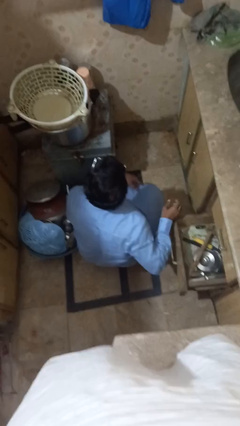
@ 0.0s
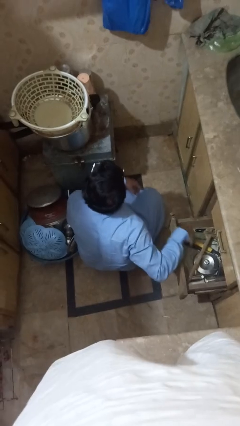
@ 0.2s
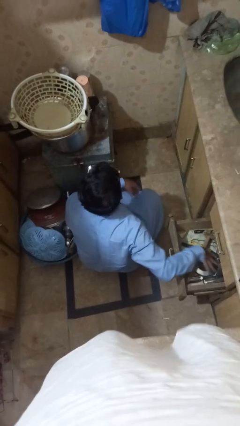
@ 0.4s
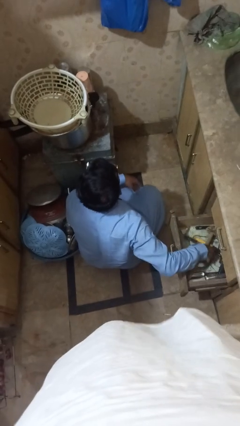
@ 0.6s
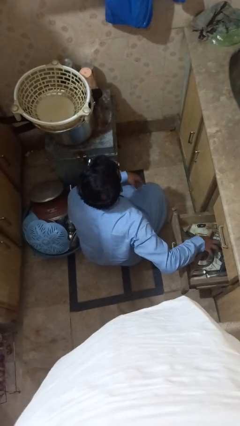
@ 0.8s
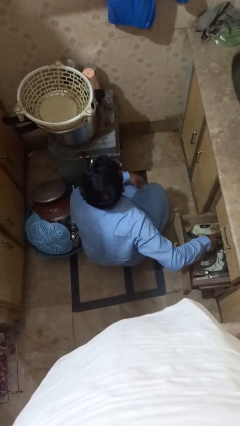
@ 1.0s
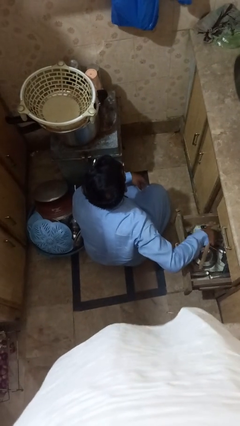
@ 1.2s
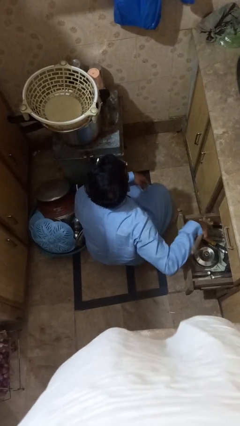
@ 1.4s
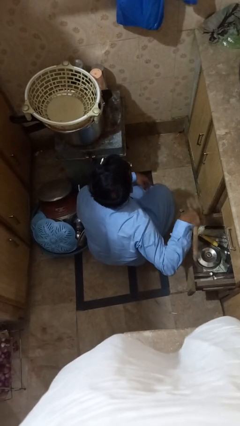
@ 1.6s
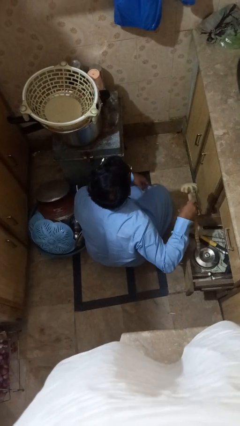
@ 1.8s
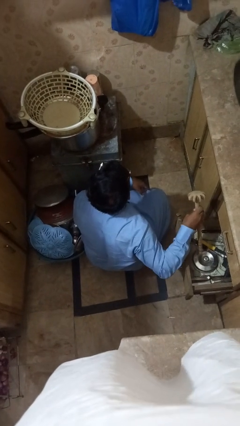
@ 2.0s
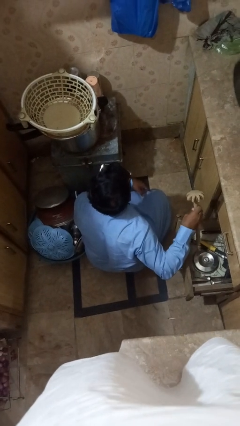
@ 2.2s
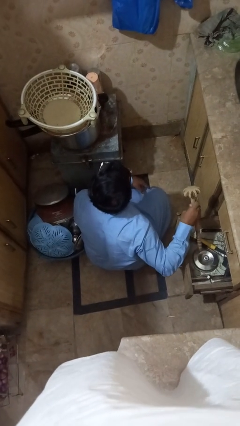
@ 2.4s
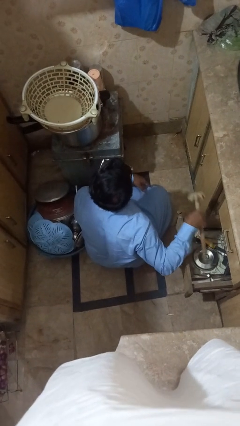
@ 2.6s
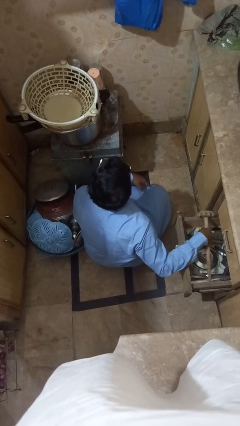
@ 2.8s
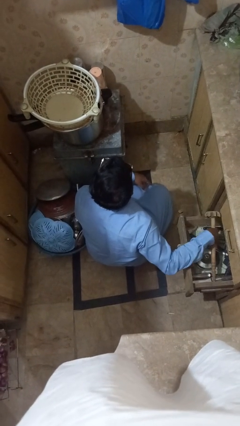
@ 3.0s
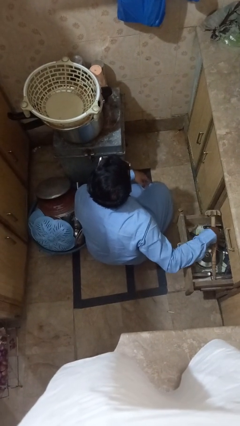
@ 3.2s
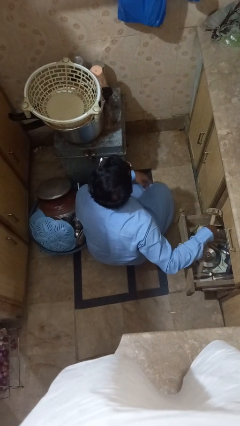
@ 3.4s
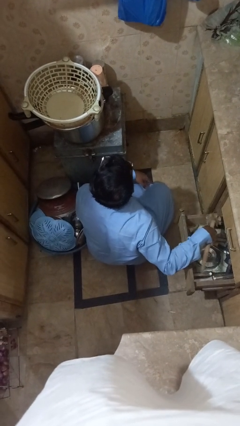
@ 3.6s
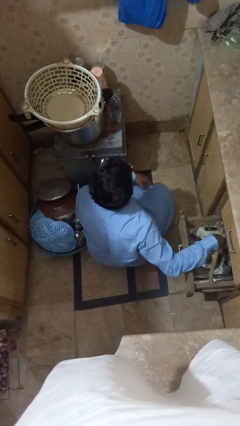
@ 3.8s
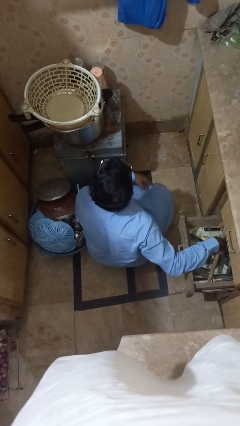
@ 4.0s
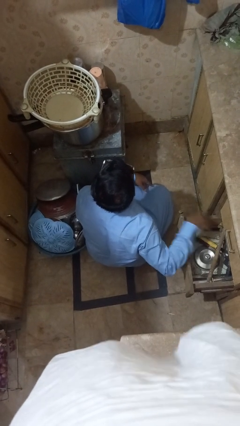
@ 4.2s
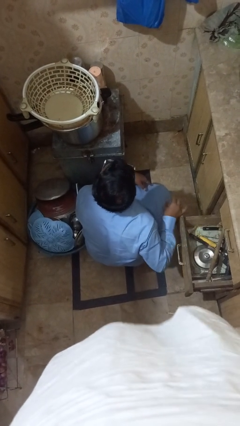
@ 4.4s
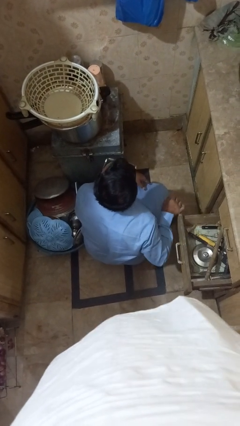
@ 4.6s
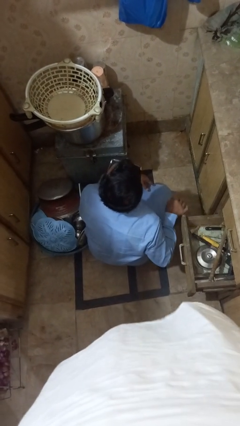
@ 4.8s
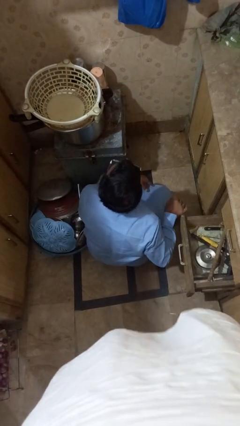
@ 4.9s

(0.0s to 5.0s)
person searches in kitchen drawer

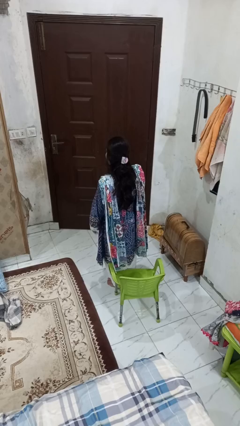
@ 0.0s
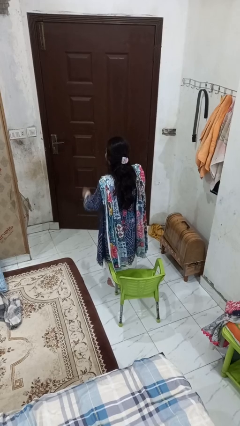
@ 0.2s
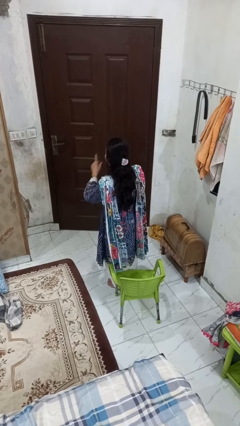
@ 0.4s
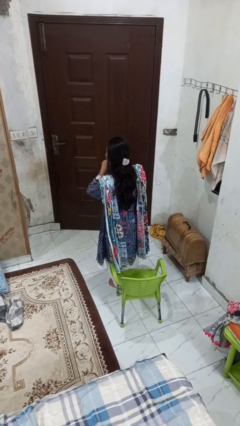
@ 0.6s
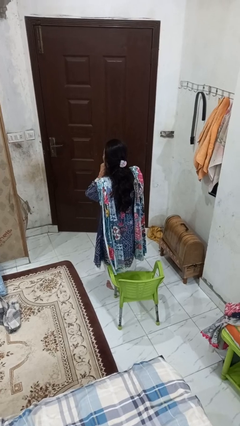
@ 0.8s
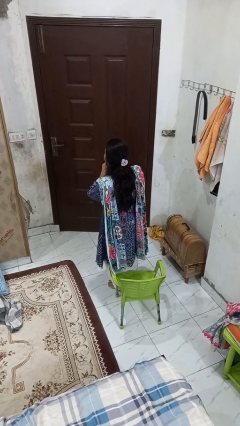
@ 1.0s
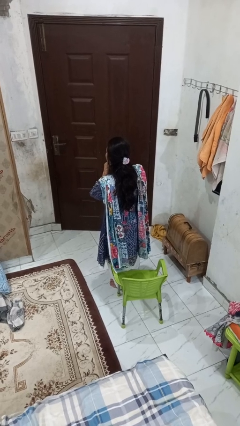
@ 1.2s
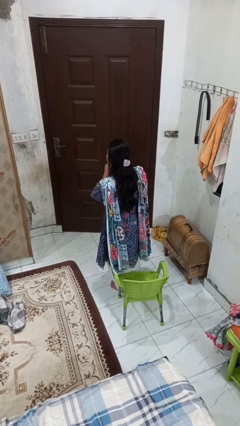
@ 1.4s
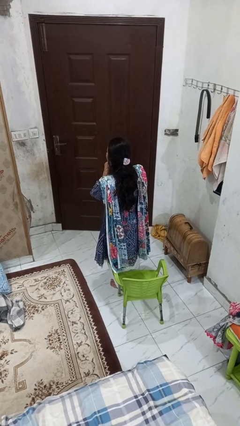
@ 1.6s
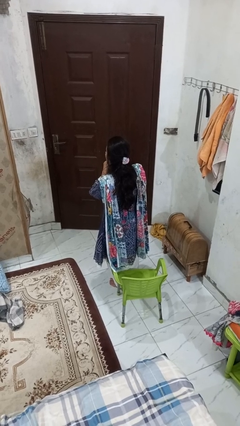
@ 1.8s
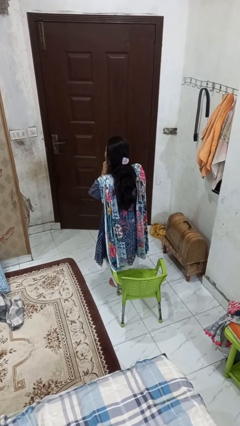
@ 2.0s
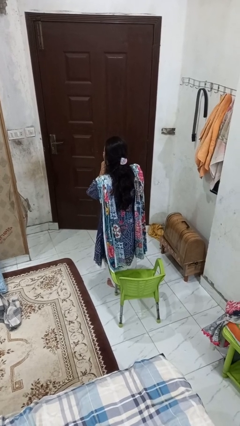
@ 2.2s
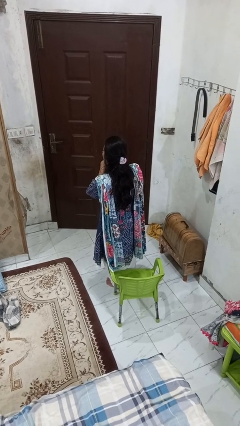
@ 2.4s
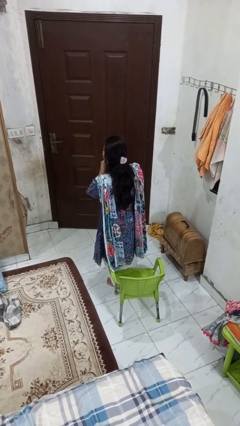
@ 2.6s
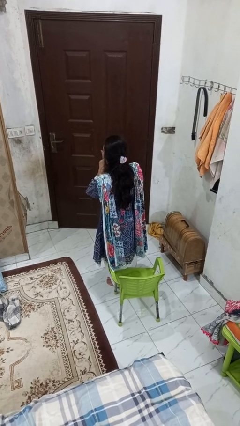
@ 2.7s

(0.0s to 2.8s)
person gestures be quiet

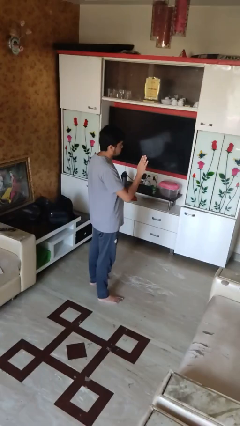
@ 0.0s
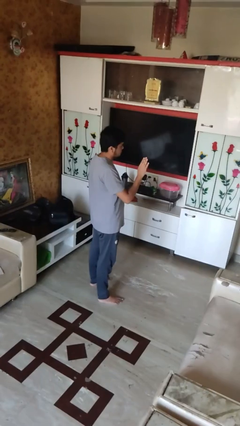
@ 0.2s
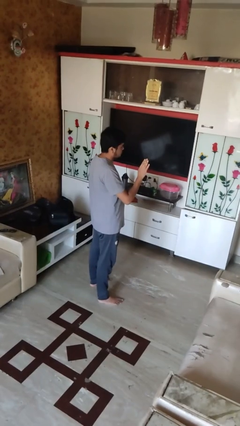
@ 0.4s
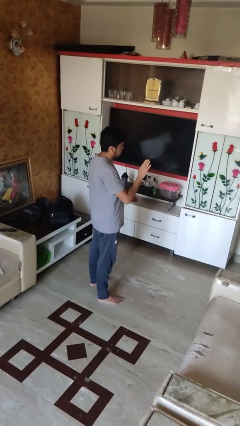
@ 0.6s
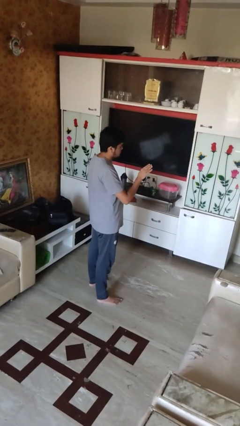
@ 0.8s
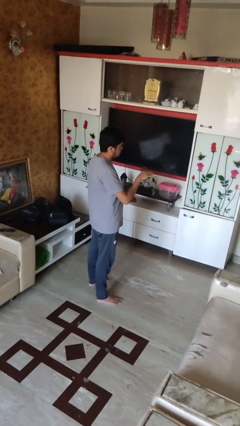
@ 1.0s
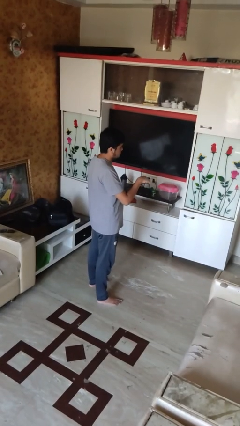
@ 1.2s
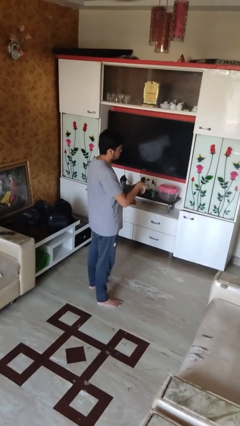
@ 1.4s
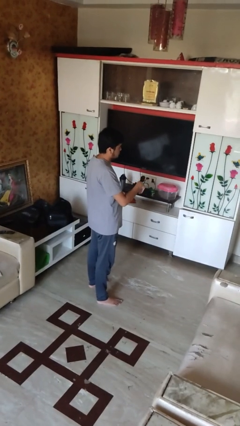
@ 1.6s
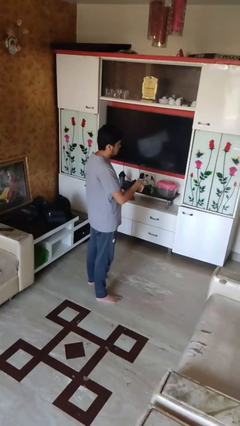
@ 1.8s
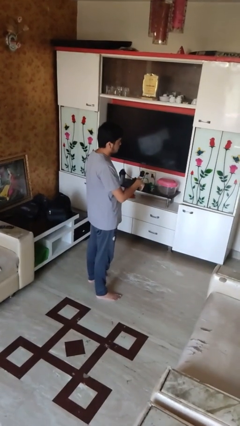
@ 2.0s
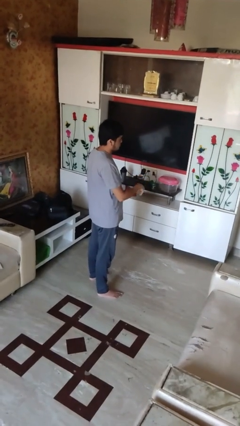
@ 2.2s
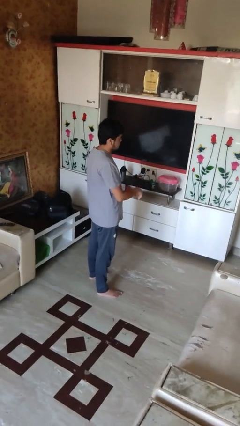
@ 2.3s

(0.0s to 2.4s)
person gestures swipe down

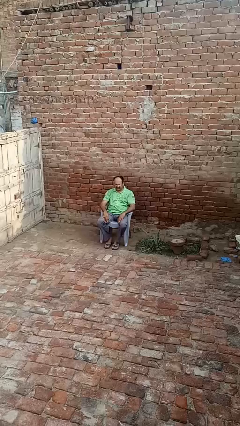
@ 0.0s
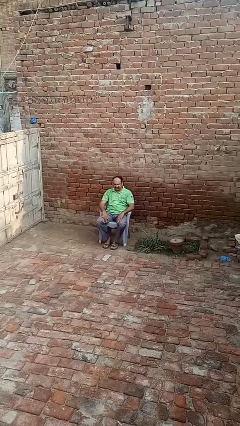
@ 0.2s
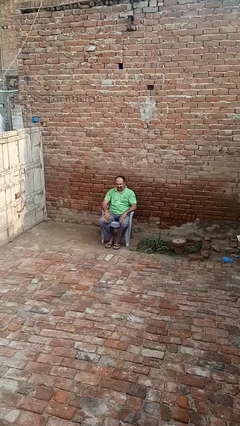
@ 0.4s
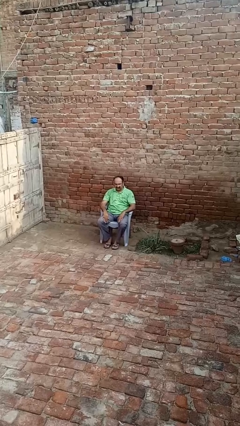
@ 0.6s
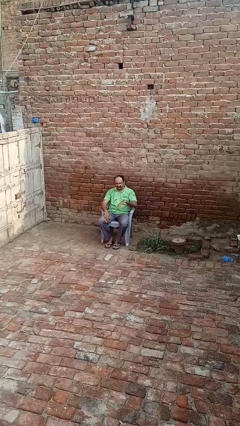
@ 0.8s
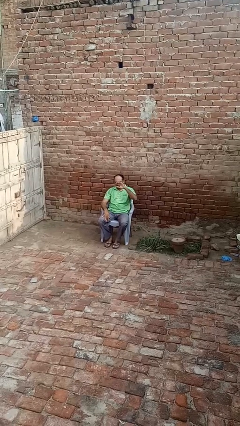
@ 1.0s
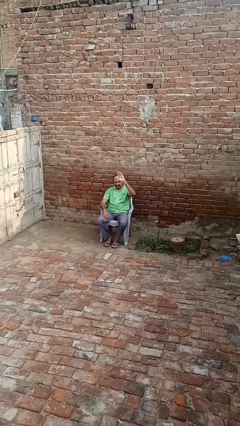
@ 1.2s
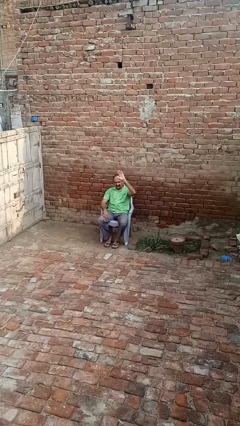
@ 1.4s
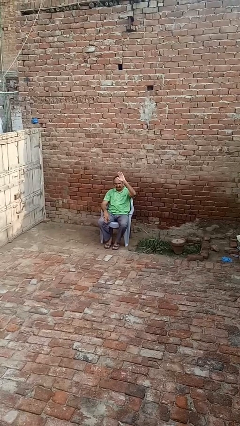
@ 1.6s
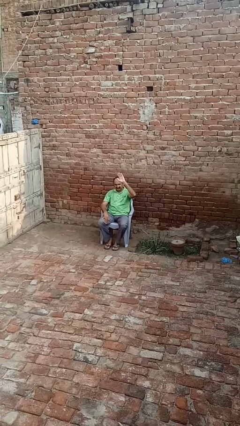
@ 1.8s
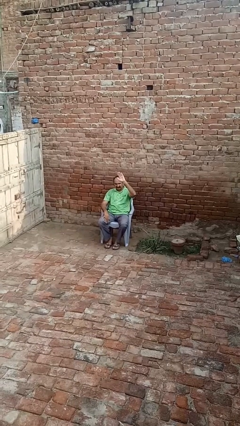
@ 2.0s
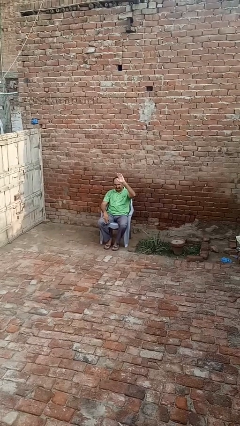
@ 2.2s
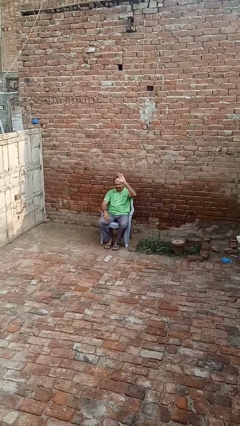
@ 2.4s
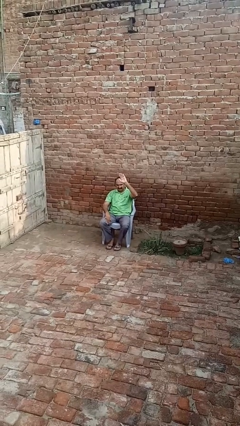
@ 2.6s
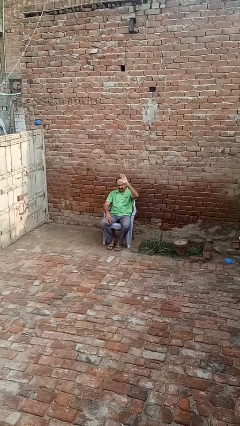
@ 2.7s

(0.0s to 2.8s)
person gestures raise hand

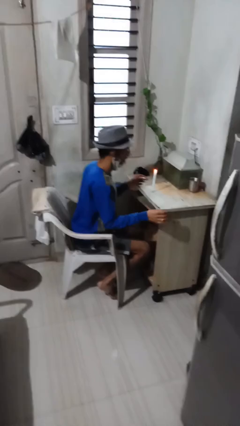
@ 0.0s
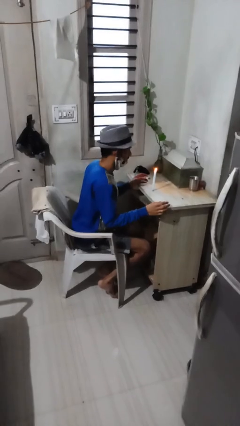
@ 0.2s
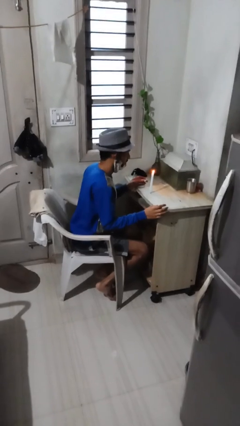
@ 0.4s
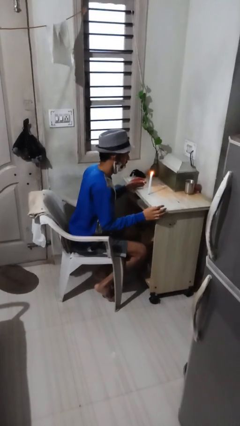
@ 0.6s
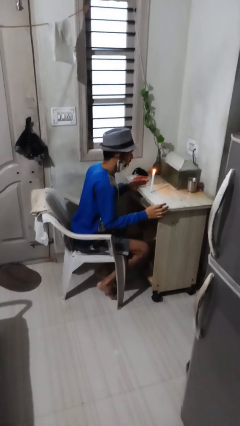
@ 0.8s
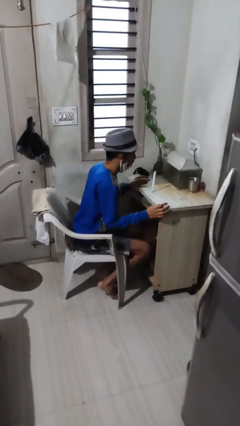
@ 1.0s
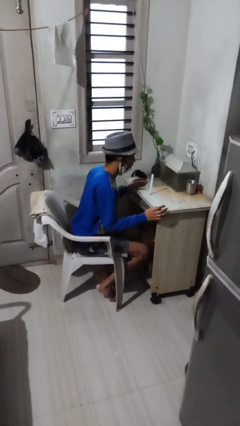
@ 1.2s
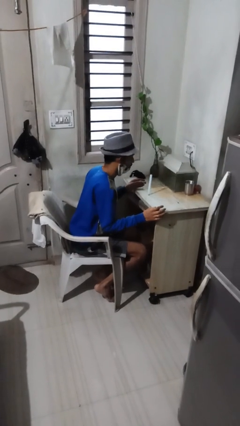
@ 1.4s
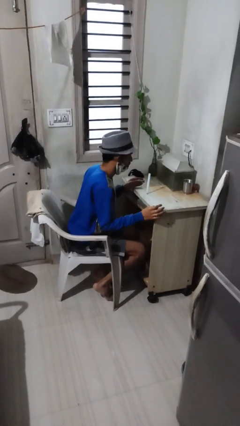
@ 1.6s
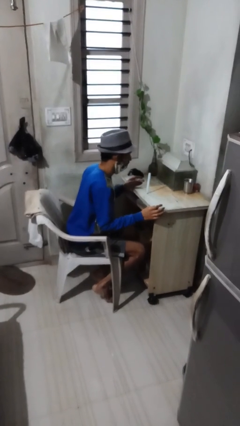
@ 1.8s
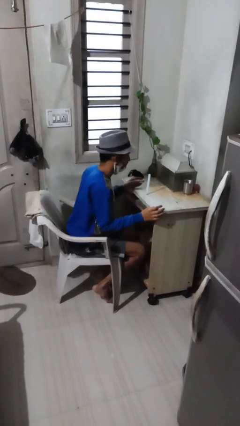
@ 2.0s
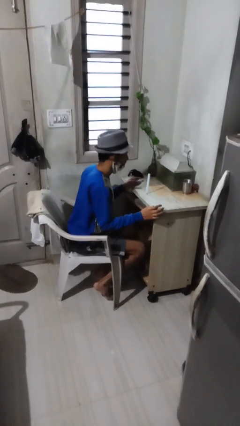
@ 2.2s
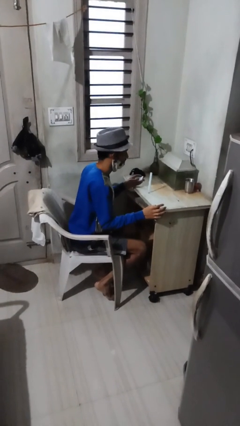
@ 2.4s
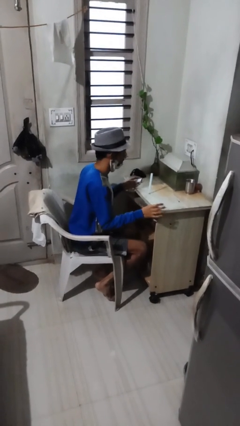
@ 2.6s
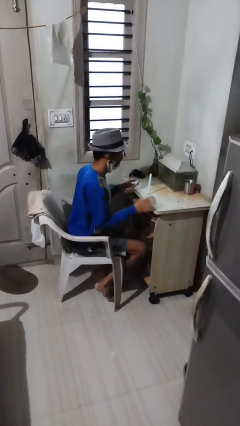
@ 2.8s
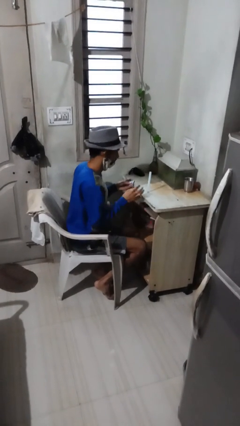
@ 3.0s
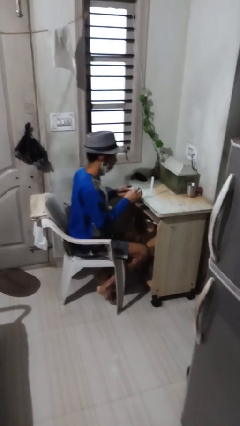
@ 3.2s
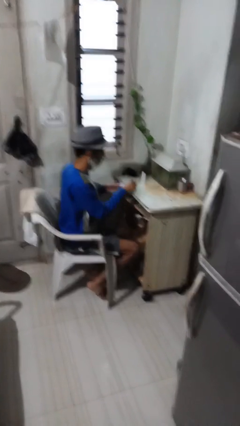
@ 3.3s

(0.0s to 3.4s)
person extinguishes candle

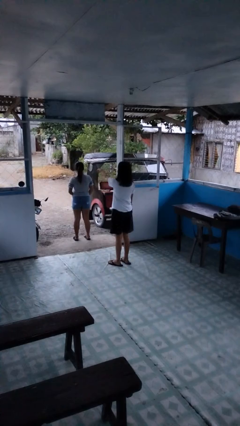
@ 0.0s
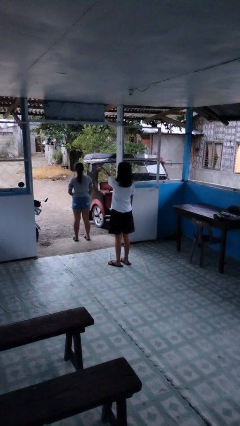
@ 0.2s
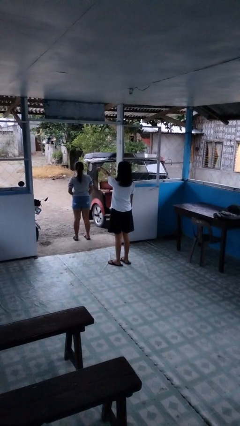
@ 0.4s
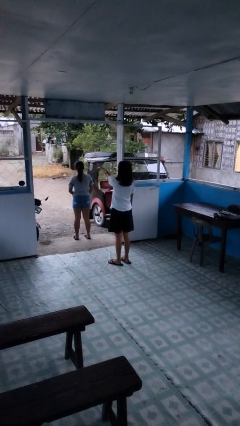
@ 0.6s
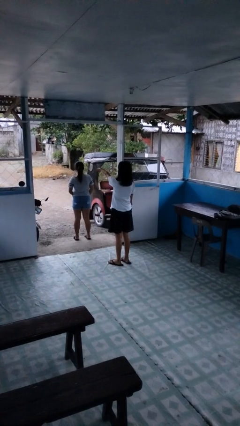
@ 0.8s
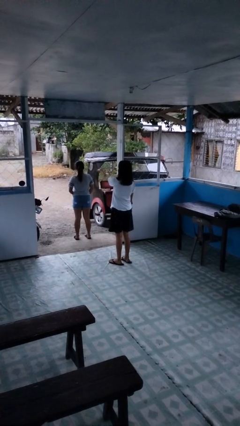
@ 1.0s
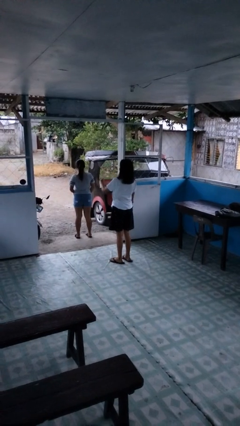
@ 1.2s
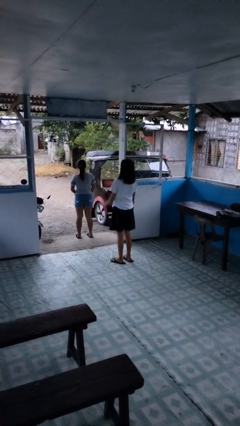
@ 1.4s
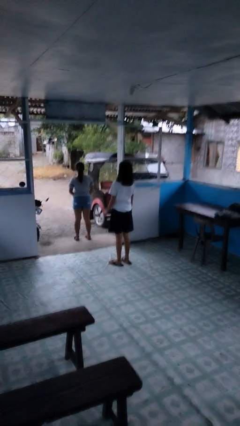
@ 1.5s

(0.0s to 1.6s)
person points at person
